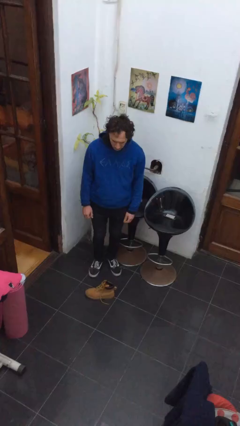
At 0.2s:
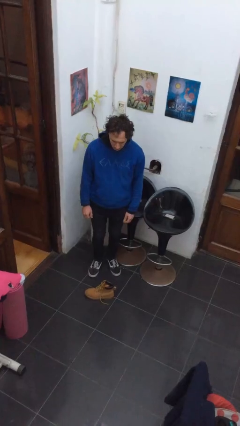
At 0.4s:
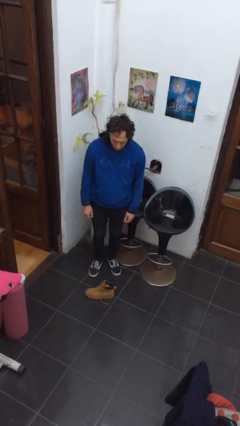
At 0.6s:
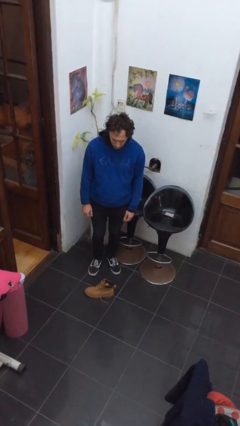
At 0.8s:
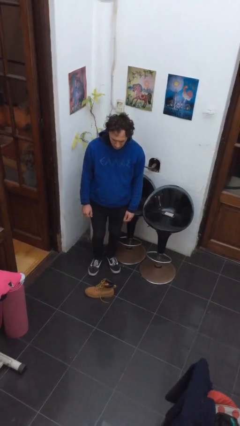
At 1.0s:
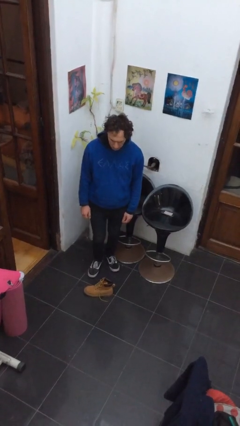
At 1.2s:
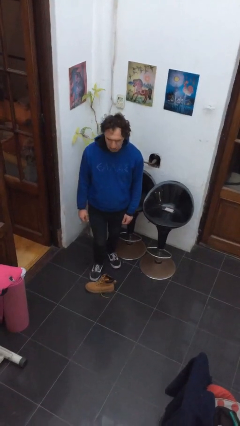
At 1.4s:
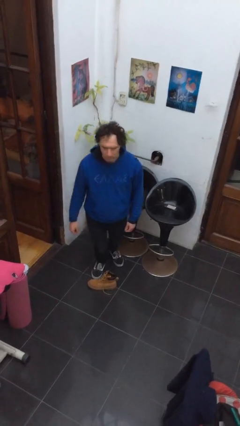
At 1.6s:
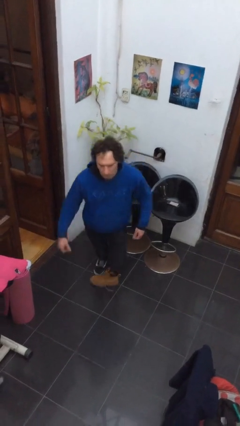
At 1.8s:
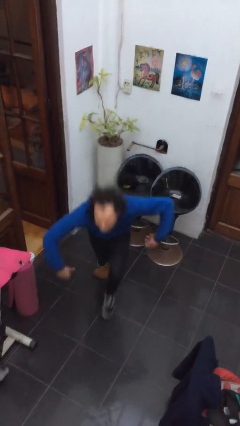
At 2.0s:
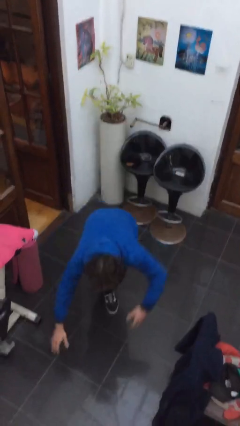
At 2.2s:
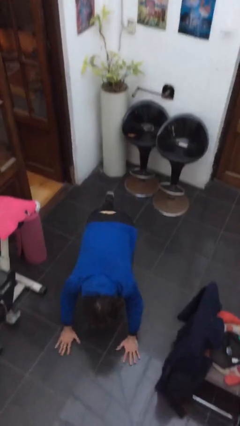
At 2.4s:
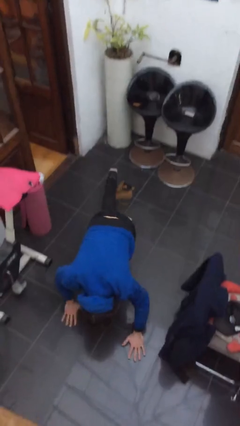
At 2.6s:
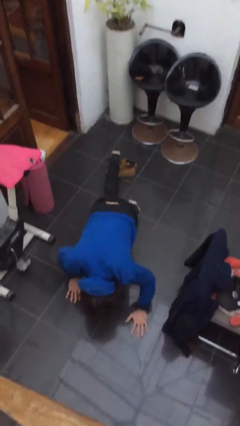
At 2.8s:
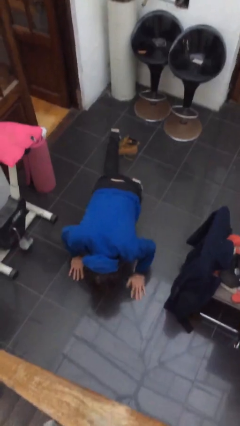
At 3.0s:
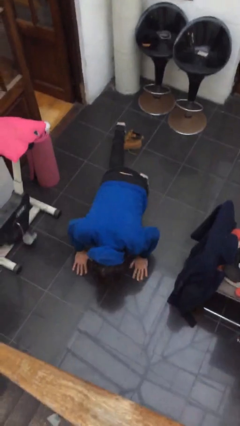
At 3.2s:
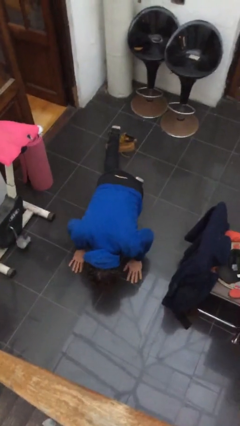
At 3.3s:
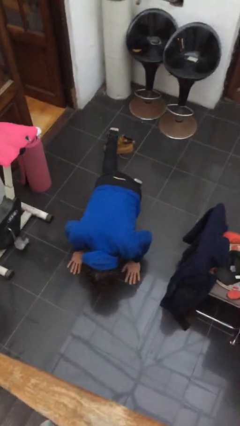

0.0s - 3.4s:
person trips on object on floor

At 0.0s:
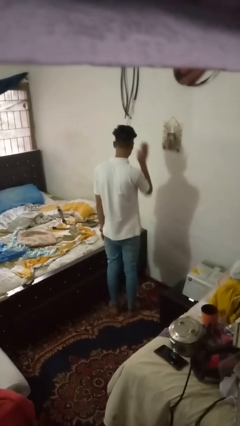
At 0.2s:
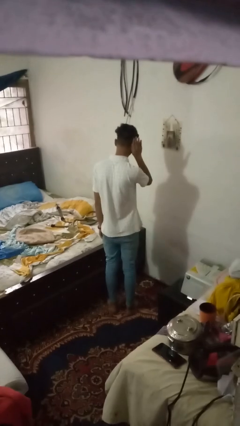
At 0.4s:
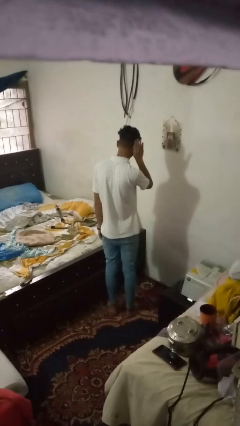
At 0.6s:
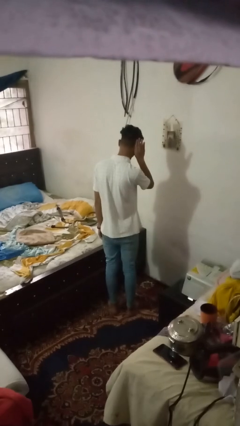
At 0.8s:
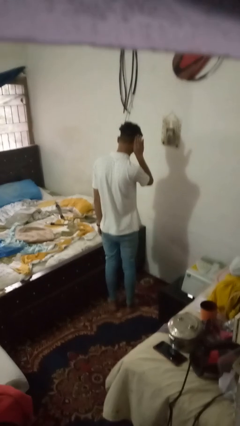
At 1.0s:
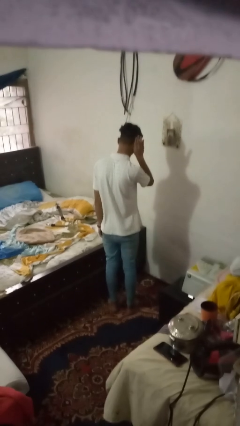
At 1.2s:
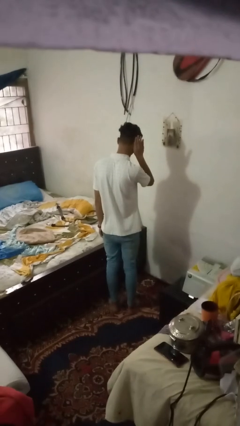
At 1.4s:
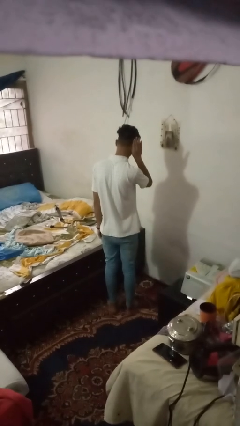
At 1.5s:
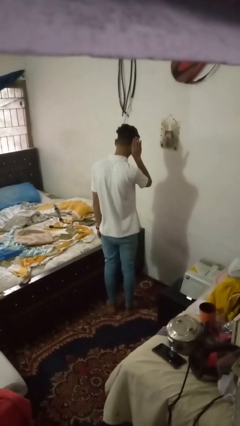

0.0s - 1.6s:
person gestures listen closely

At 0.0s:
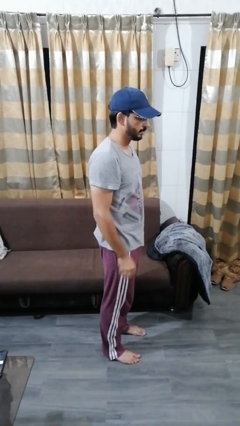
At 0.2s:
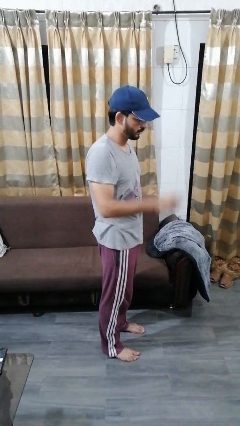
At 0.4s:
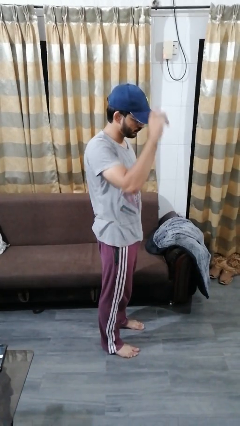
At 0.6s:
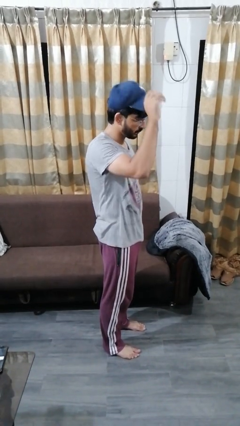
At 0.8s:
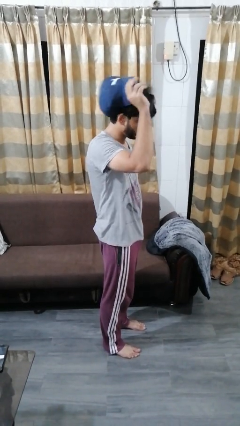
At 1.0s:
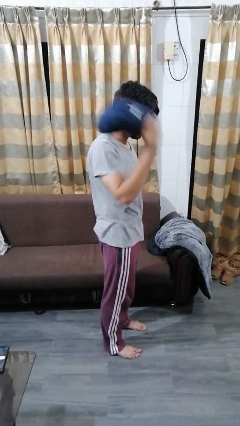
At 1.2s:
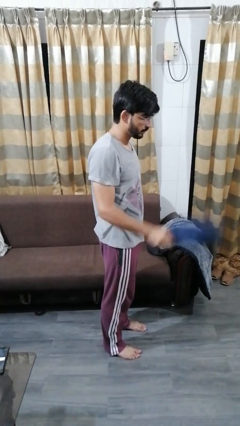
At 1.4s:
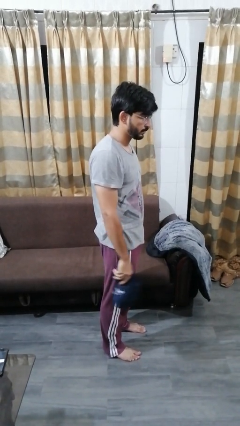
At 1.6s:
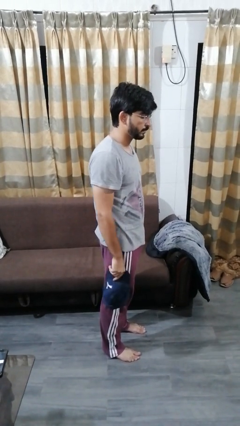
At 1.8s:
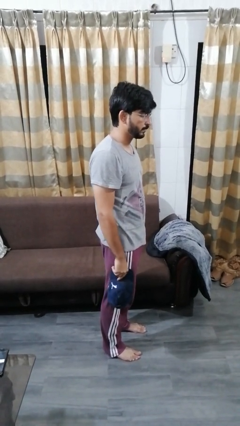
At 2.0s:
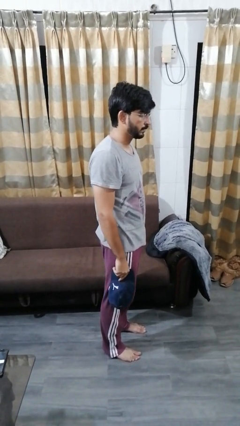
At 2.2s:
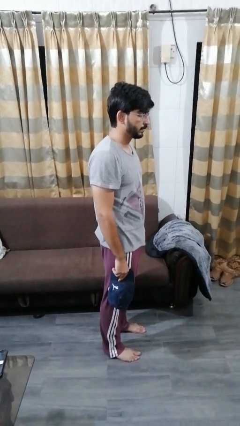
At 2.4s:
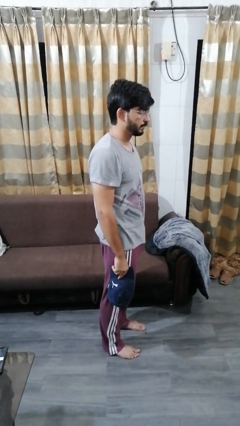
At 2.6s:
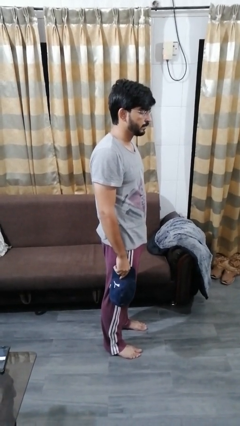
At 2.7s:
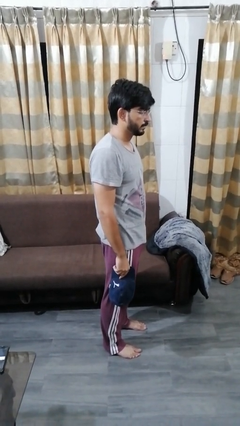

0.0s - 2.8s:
person takes off hat

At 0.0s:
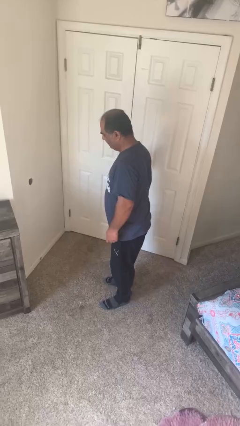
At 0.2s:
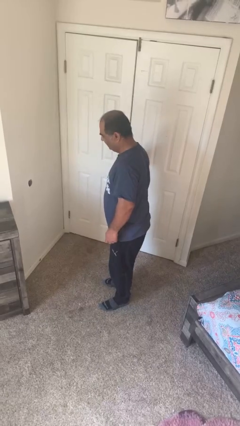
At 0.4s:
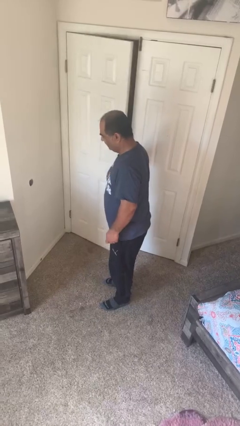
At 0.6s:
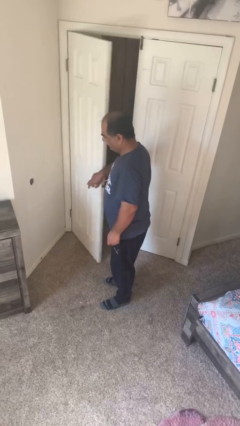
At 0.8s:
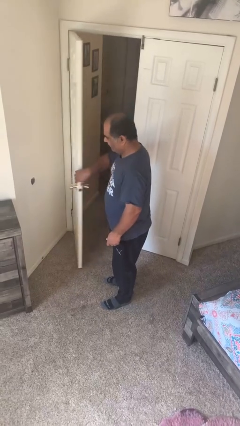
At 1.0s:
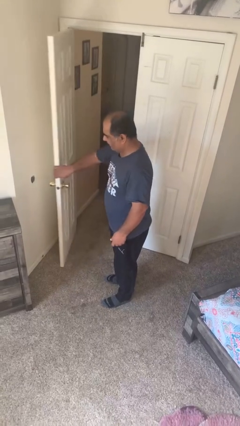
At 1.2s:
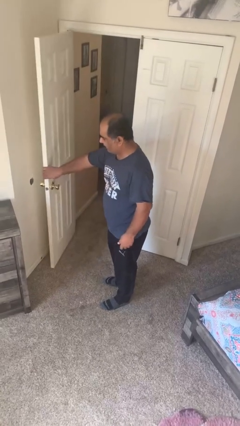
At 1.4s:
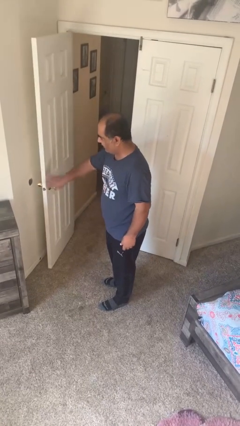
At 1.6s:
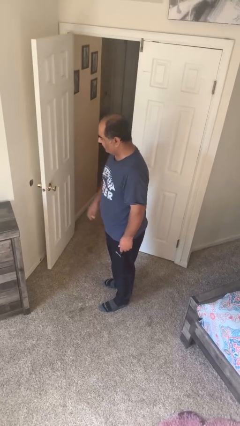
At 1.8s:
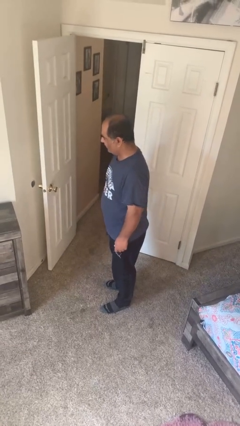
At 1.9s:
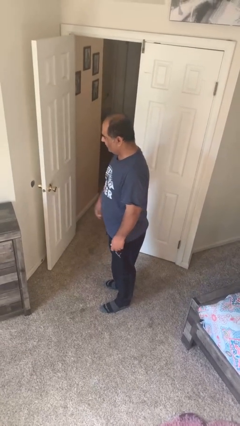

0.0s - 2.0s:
person opens facility door

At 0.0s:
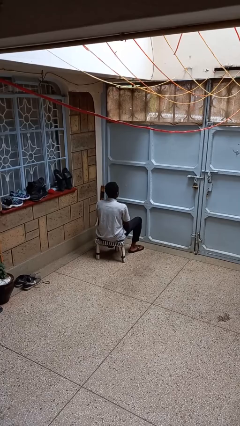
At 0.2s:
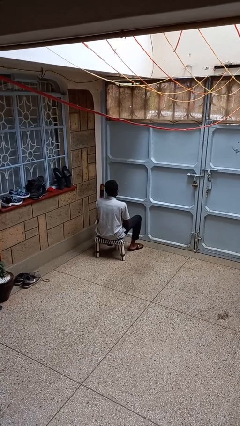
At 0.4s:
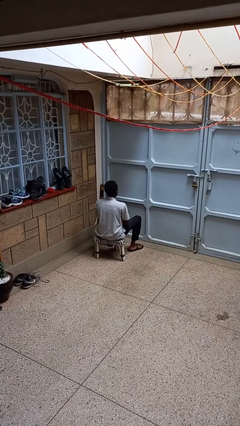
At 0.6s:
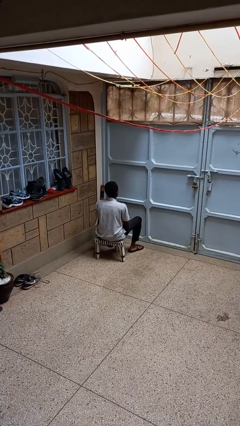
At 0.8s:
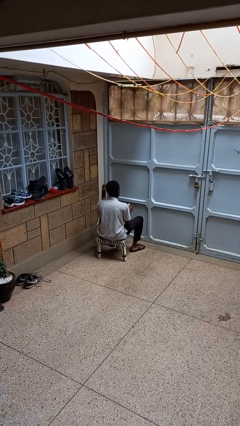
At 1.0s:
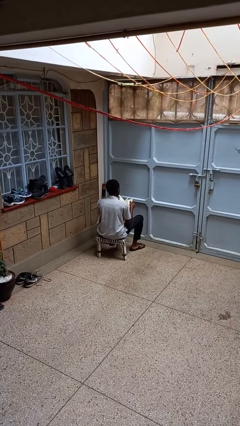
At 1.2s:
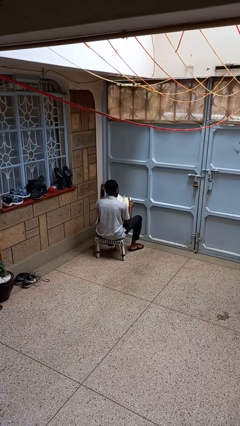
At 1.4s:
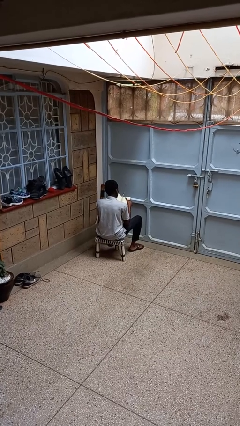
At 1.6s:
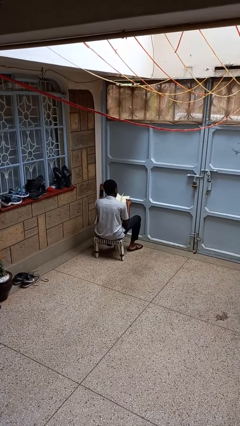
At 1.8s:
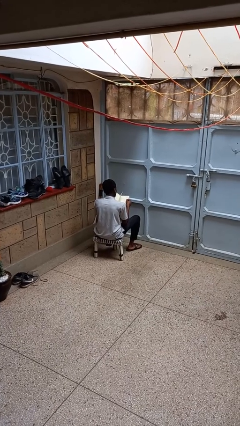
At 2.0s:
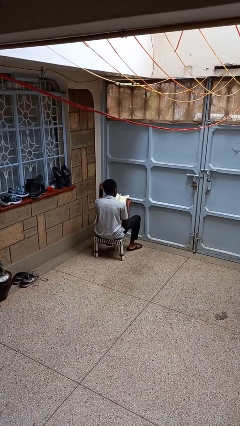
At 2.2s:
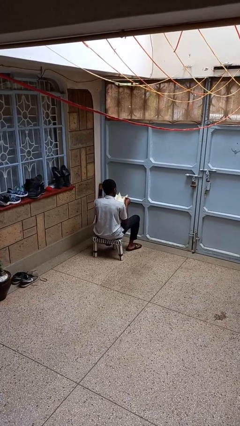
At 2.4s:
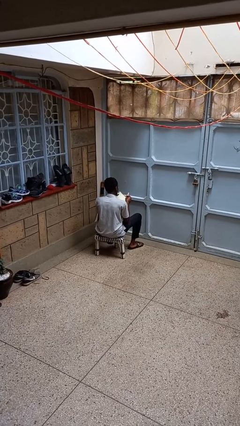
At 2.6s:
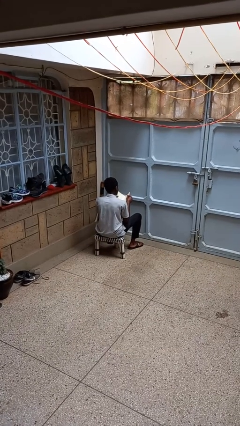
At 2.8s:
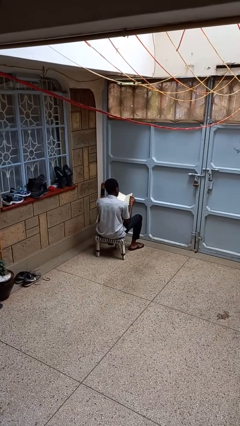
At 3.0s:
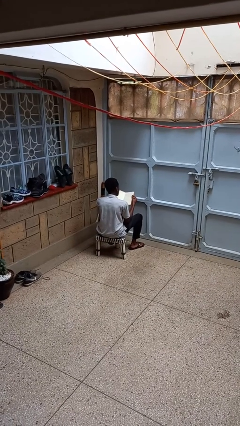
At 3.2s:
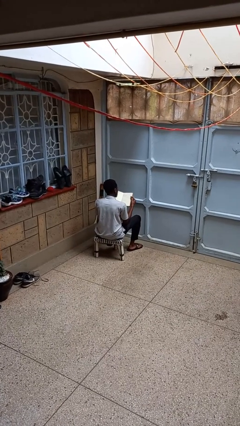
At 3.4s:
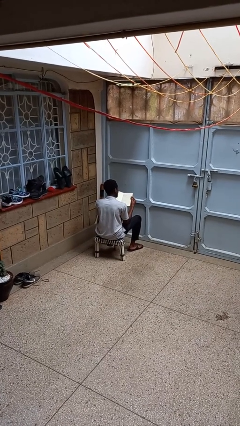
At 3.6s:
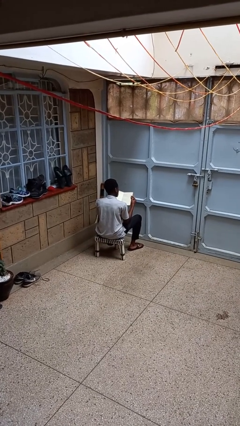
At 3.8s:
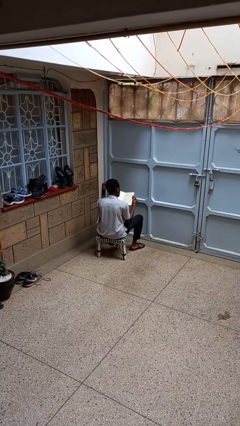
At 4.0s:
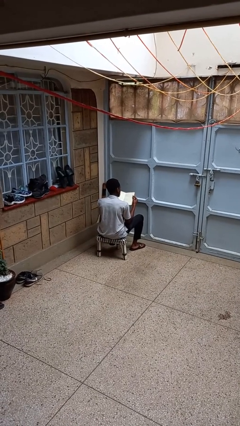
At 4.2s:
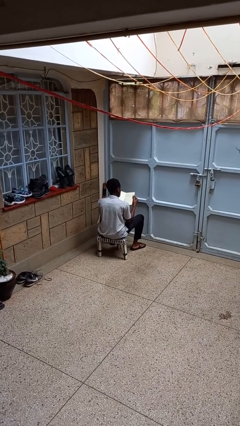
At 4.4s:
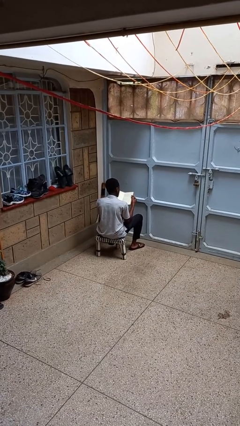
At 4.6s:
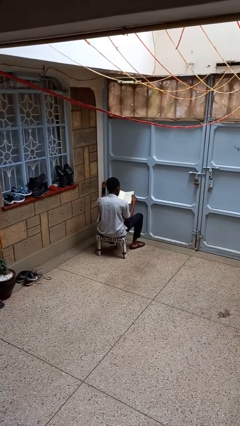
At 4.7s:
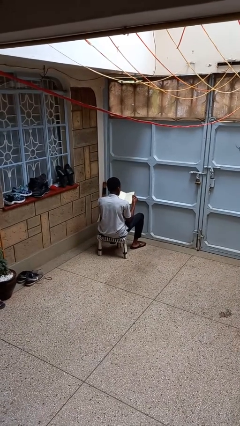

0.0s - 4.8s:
person reads book

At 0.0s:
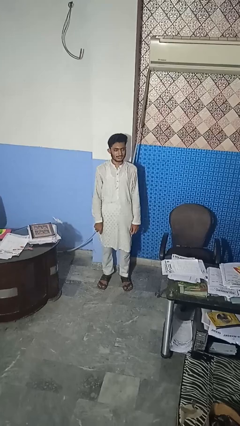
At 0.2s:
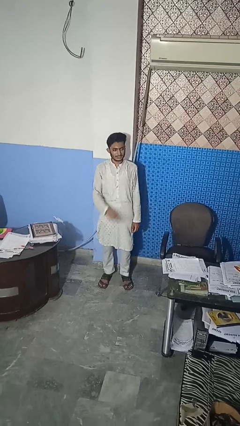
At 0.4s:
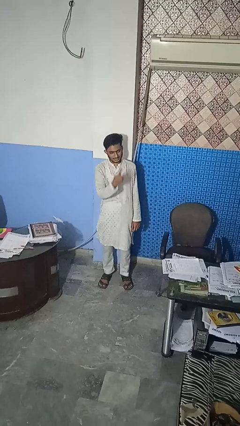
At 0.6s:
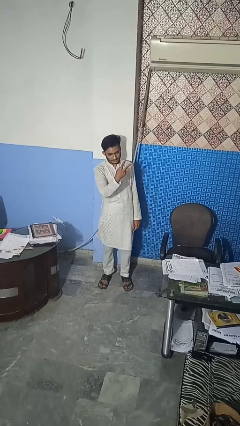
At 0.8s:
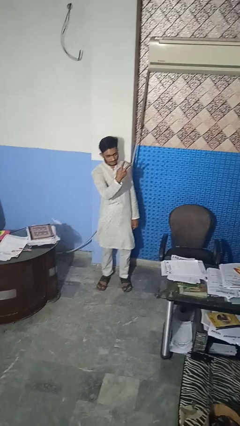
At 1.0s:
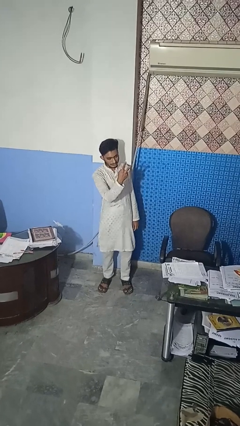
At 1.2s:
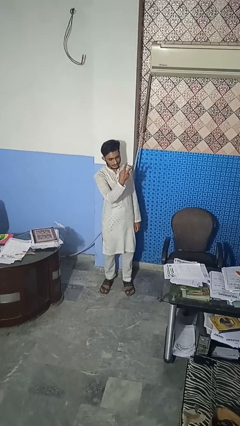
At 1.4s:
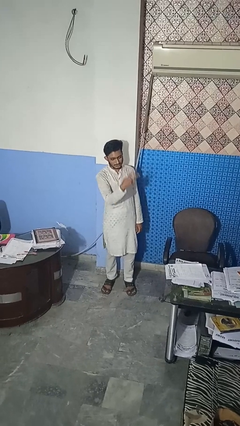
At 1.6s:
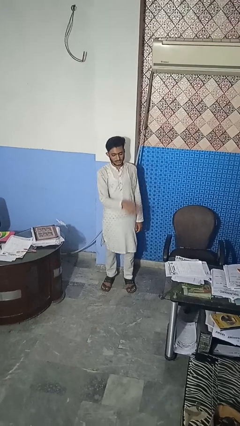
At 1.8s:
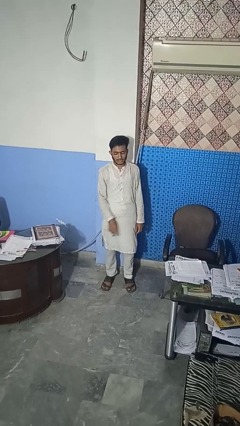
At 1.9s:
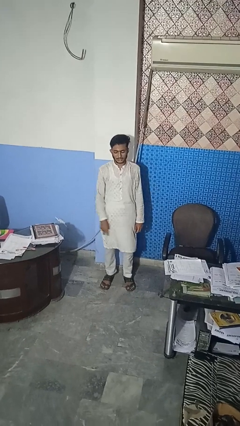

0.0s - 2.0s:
person gestures peace

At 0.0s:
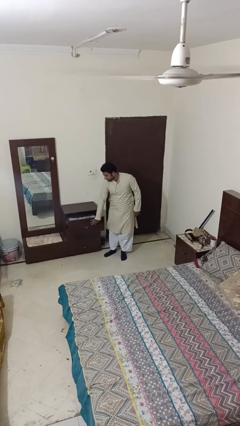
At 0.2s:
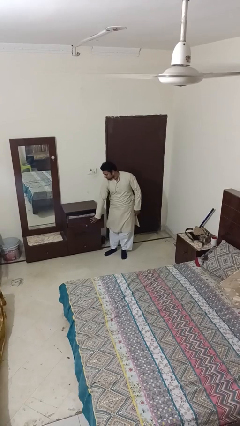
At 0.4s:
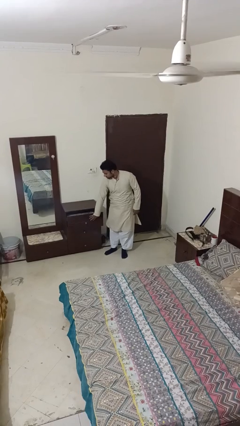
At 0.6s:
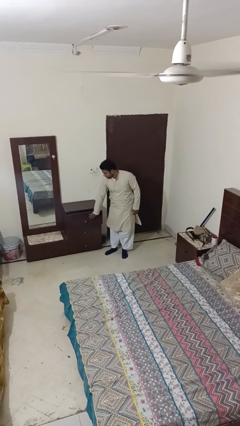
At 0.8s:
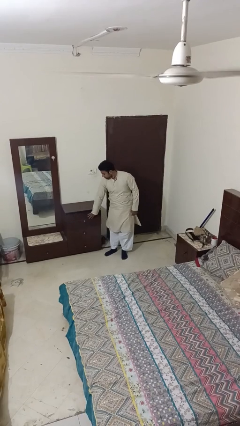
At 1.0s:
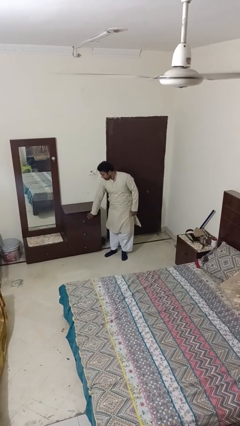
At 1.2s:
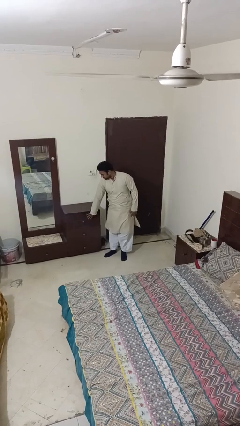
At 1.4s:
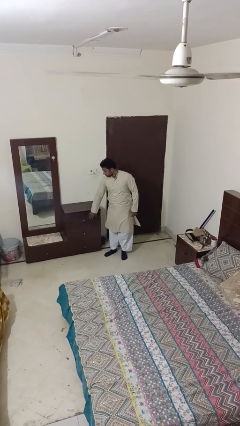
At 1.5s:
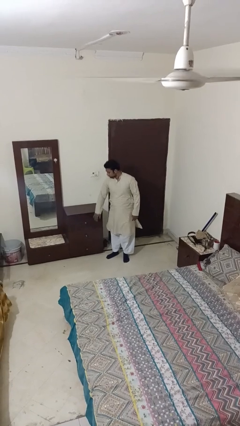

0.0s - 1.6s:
person closes dresser drawer
